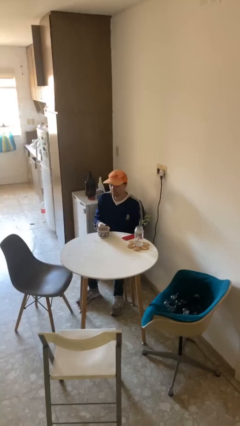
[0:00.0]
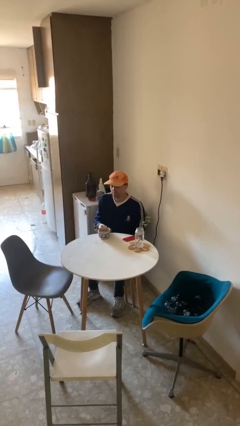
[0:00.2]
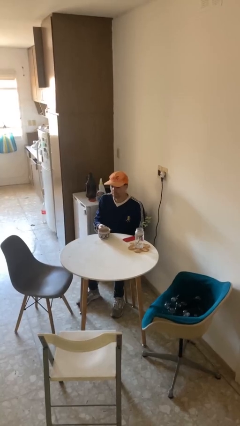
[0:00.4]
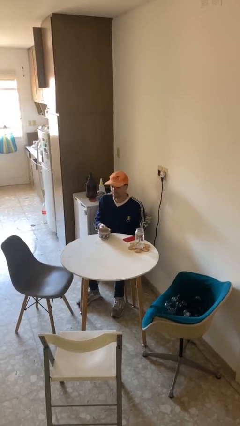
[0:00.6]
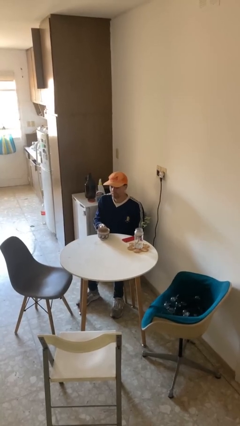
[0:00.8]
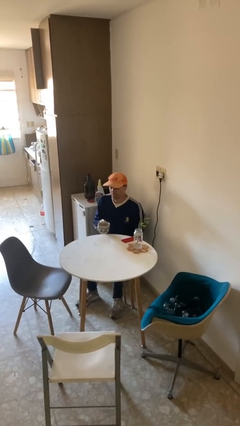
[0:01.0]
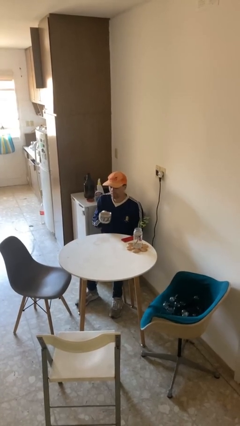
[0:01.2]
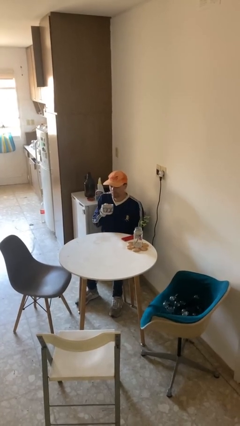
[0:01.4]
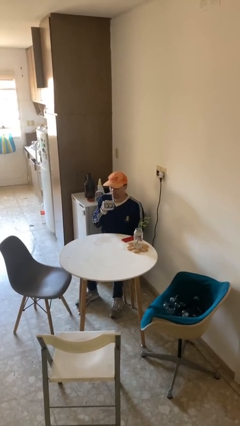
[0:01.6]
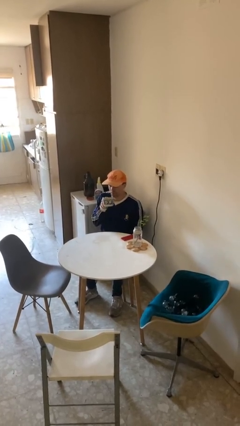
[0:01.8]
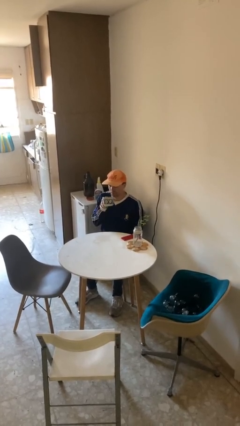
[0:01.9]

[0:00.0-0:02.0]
person picks up object from table

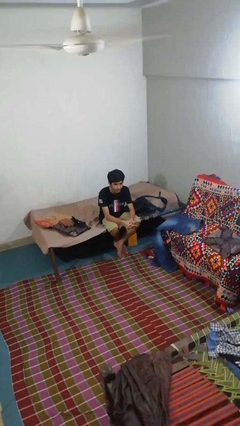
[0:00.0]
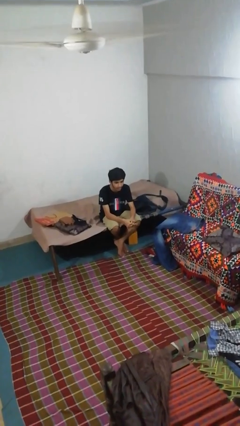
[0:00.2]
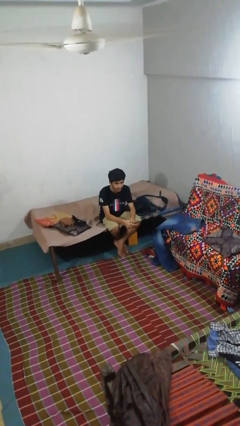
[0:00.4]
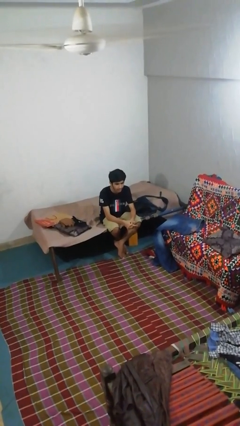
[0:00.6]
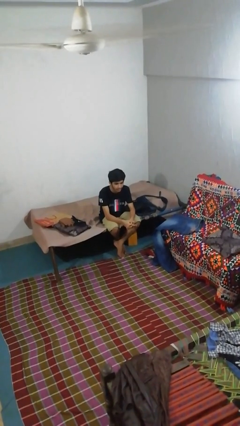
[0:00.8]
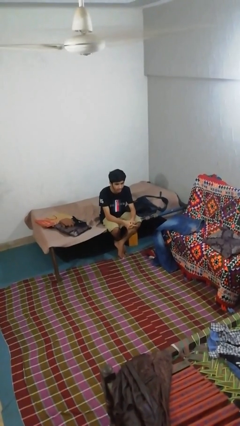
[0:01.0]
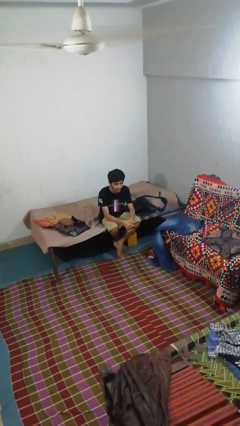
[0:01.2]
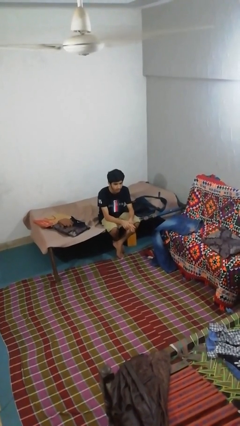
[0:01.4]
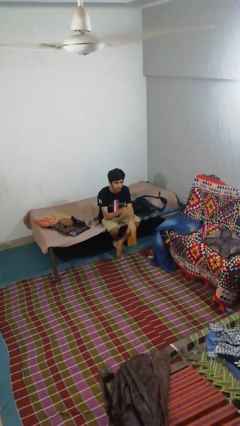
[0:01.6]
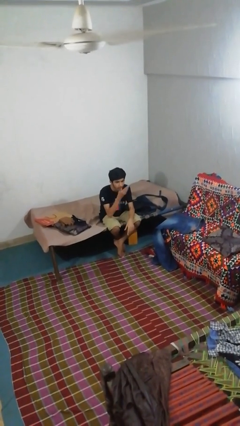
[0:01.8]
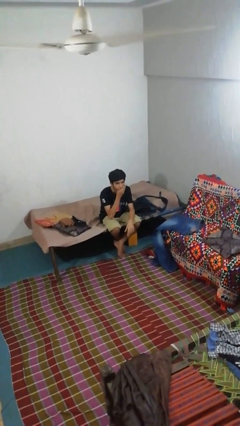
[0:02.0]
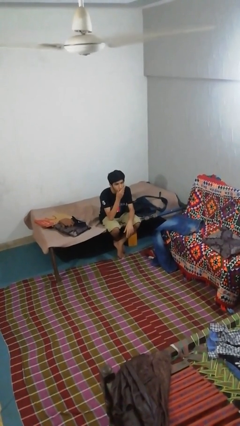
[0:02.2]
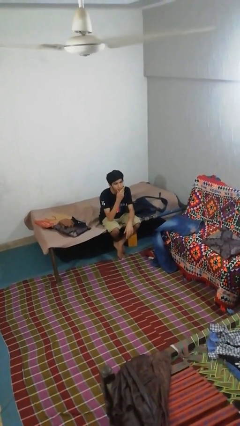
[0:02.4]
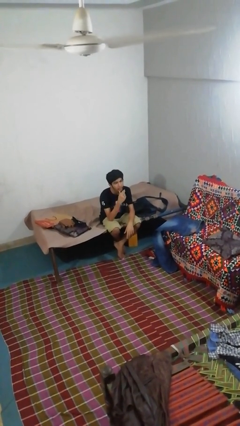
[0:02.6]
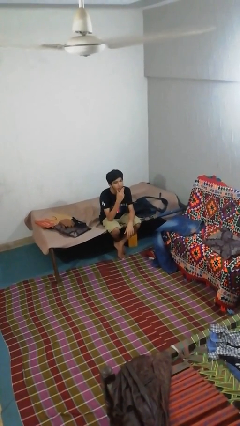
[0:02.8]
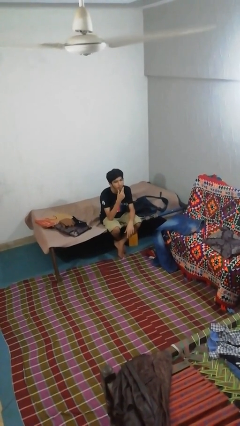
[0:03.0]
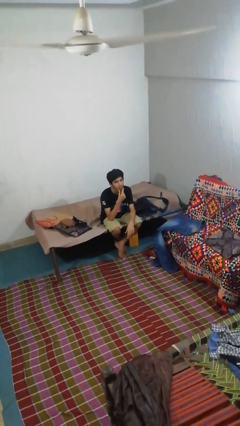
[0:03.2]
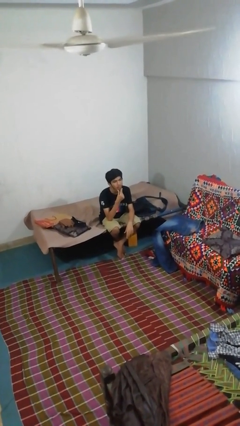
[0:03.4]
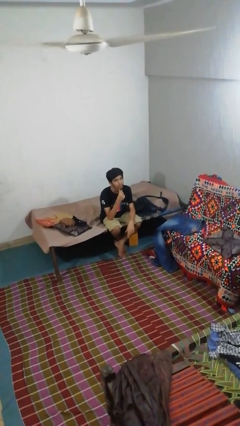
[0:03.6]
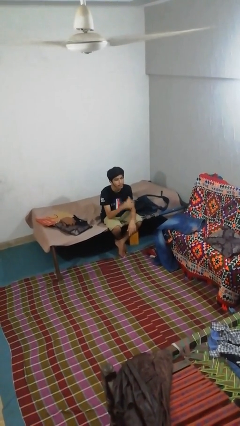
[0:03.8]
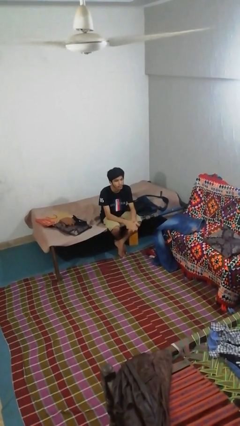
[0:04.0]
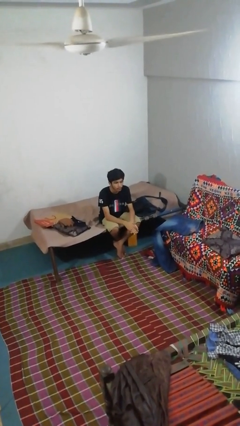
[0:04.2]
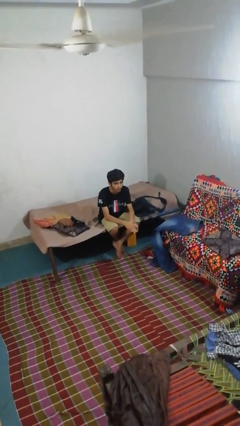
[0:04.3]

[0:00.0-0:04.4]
person strokes chin

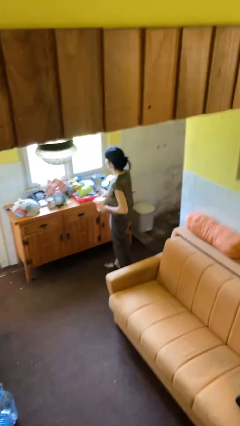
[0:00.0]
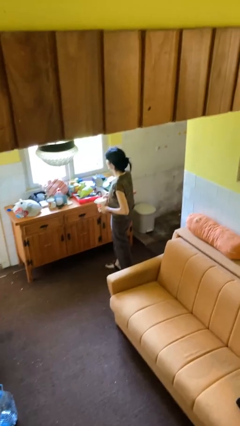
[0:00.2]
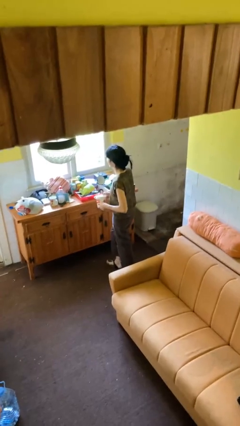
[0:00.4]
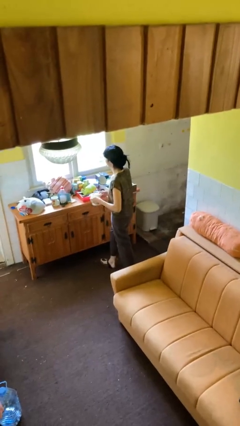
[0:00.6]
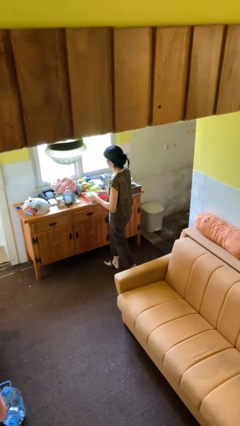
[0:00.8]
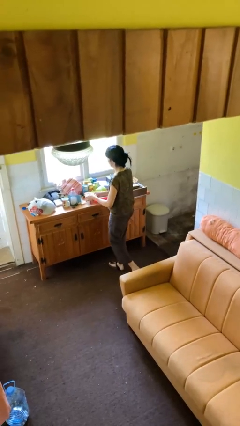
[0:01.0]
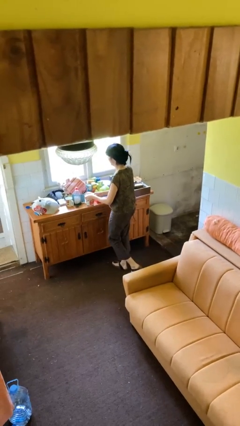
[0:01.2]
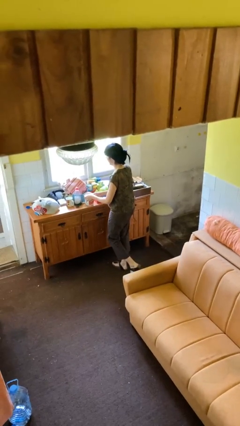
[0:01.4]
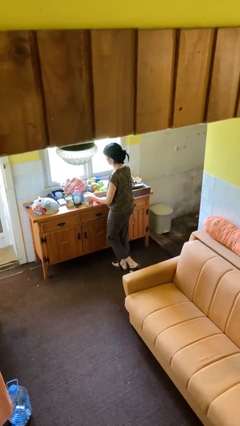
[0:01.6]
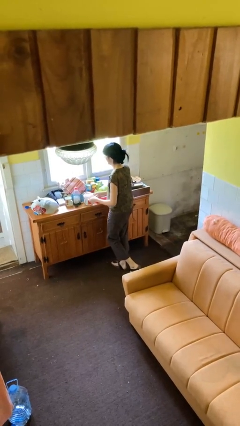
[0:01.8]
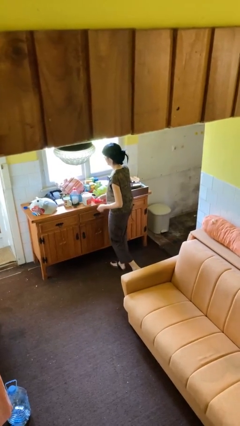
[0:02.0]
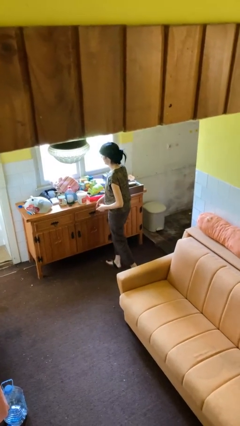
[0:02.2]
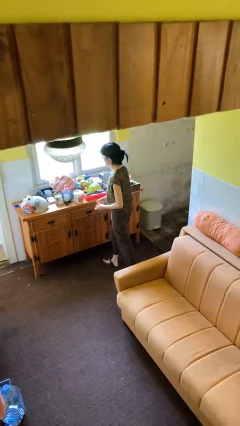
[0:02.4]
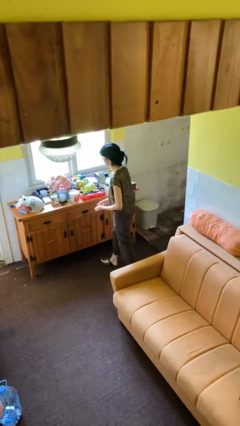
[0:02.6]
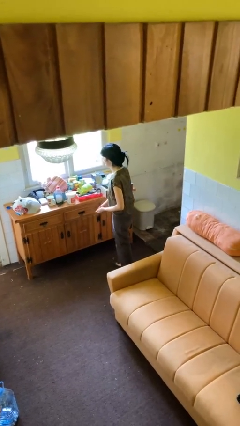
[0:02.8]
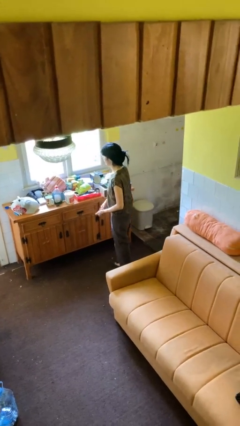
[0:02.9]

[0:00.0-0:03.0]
person puts down object on countertop

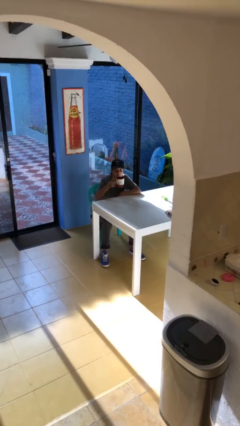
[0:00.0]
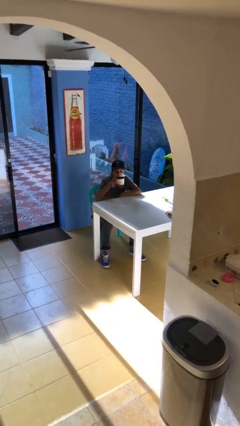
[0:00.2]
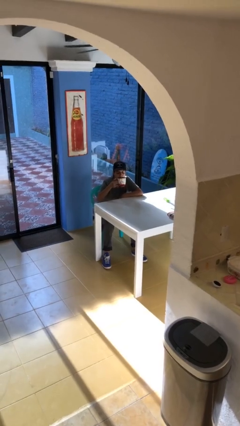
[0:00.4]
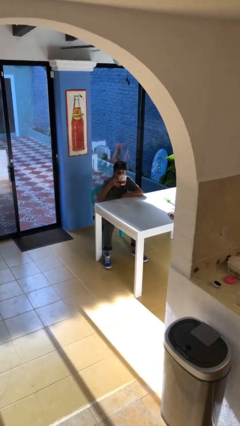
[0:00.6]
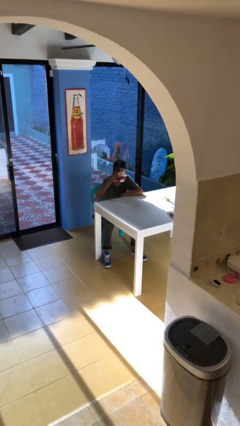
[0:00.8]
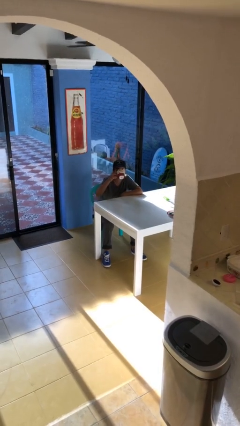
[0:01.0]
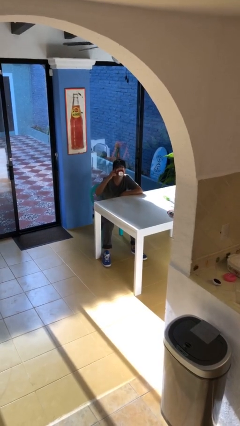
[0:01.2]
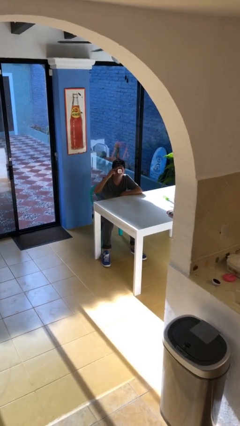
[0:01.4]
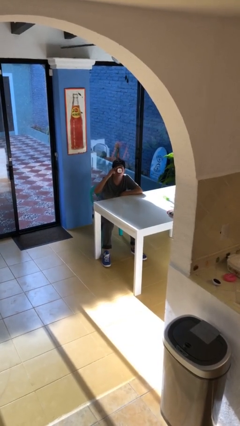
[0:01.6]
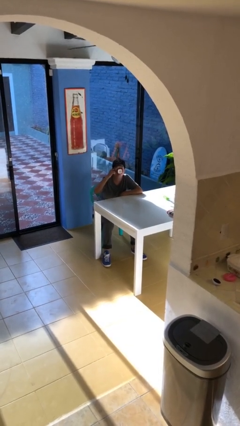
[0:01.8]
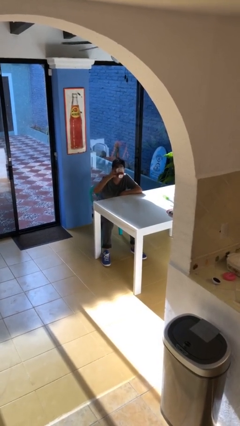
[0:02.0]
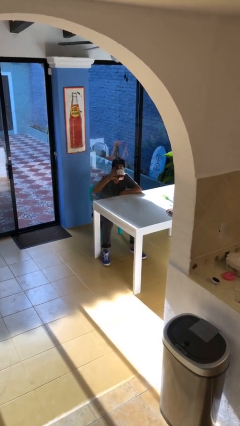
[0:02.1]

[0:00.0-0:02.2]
person drinks from mug

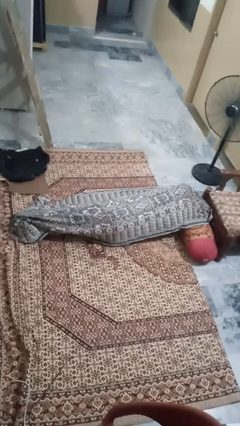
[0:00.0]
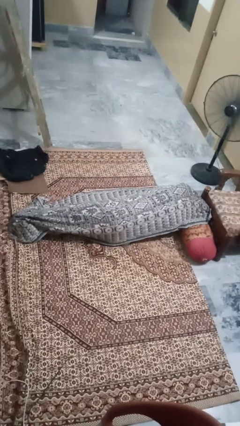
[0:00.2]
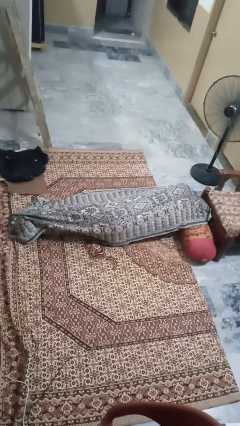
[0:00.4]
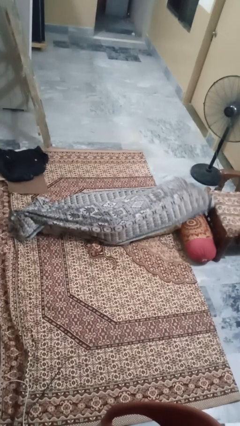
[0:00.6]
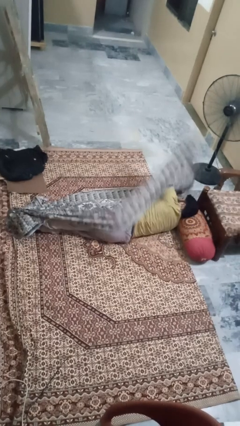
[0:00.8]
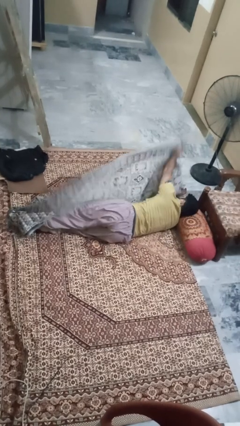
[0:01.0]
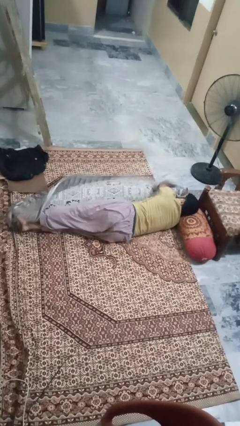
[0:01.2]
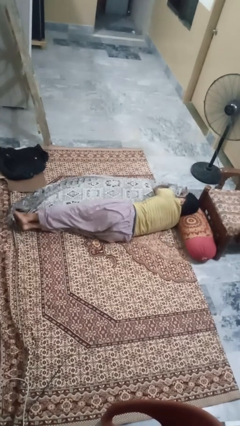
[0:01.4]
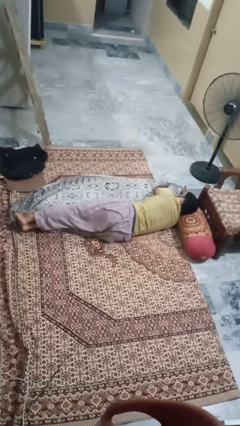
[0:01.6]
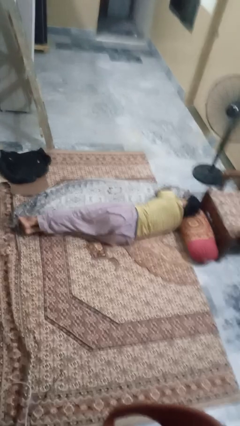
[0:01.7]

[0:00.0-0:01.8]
person uncovers with blanket

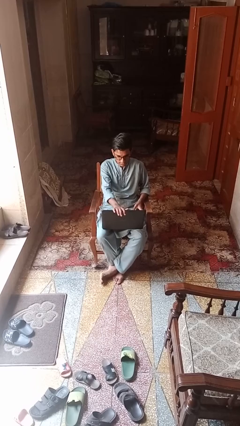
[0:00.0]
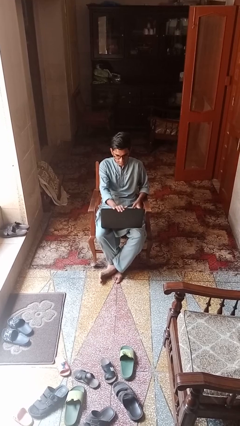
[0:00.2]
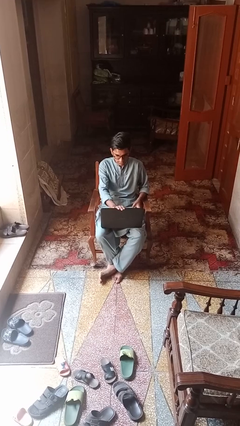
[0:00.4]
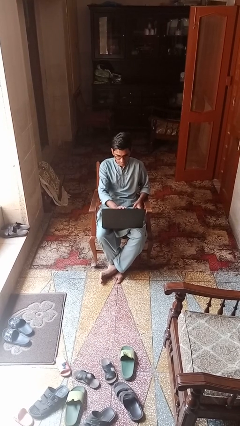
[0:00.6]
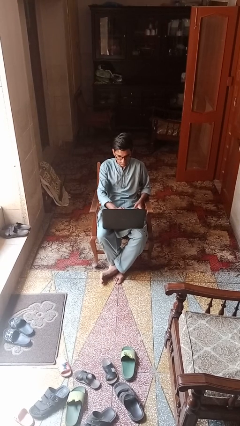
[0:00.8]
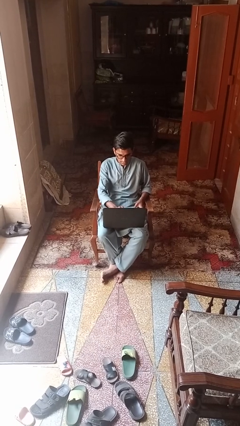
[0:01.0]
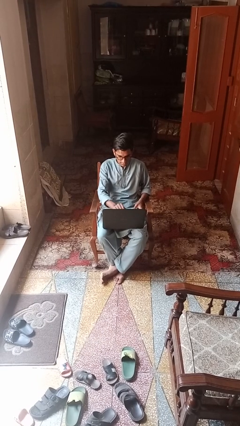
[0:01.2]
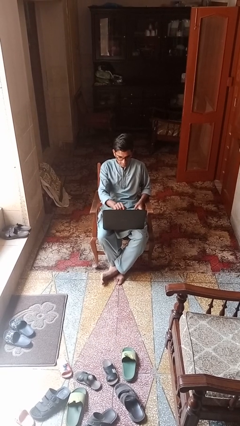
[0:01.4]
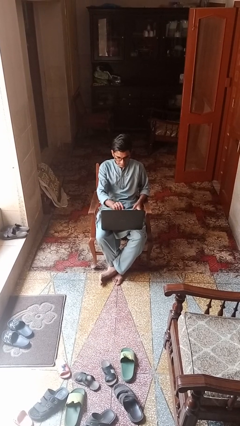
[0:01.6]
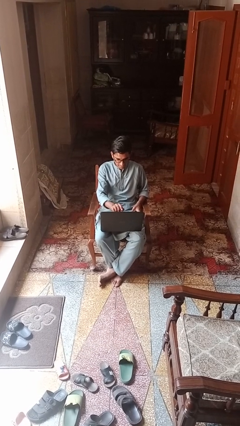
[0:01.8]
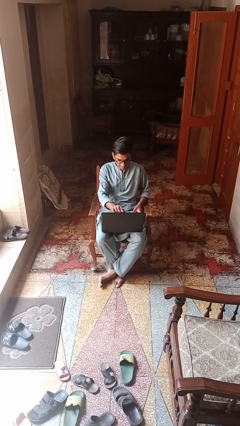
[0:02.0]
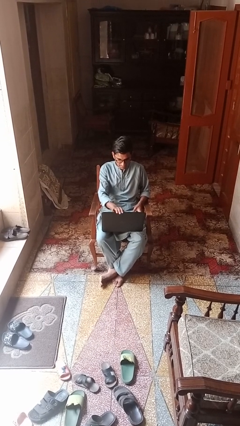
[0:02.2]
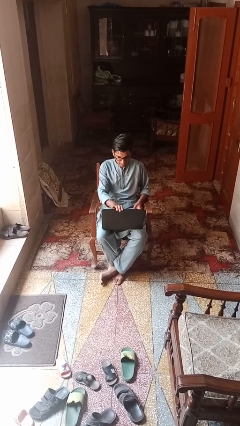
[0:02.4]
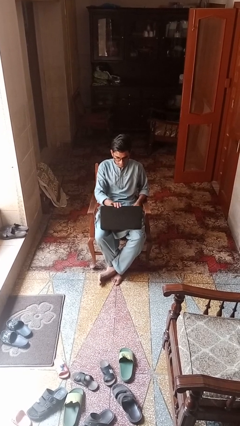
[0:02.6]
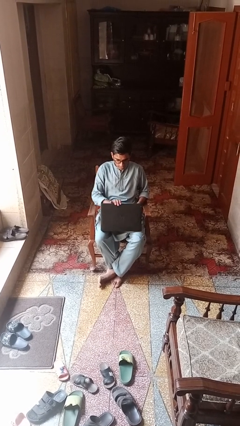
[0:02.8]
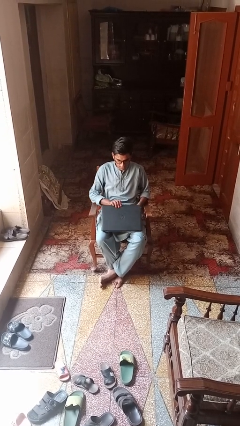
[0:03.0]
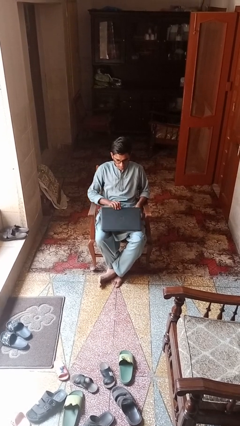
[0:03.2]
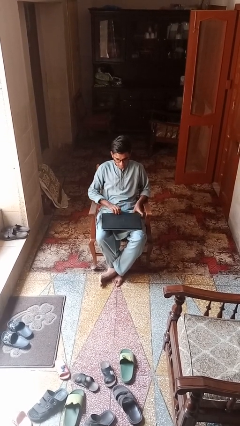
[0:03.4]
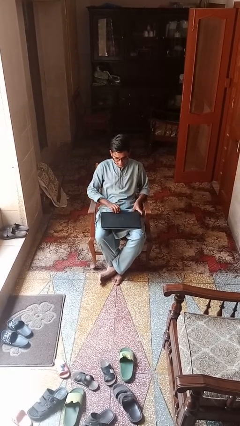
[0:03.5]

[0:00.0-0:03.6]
person opens laptop
